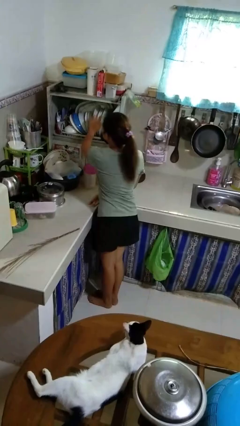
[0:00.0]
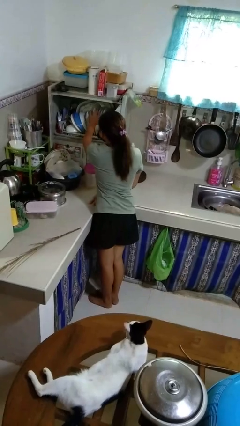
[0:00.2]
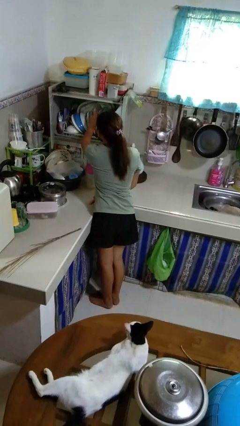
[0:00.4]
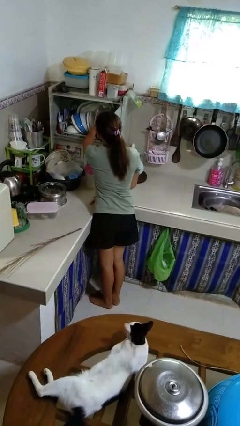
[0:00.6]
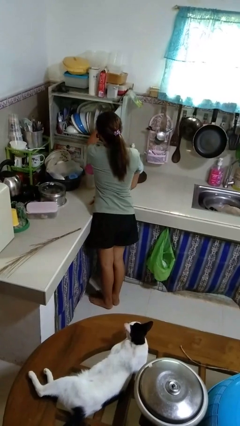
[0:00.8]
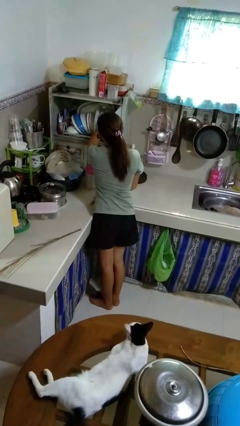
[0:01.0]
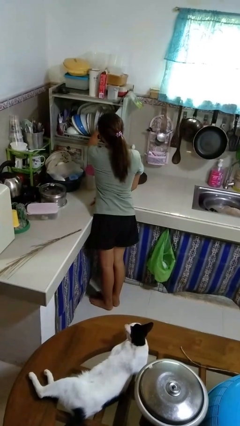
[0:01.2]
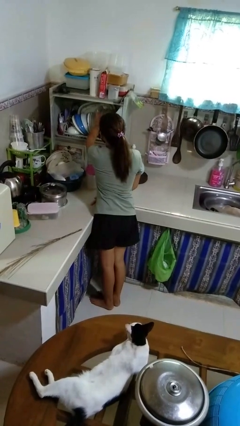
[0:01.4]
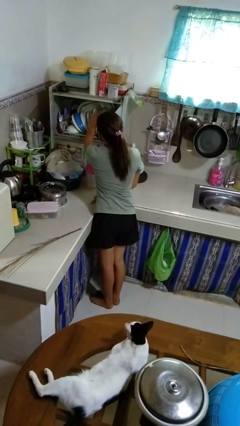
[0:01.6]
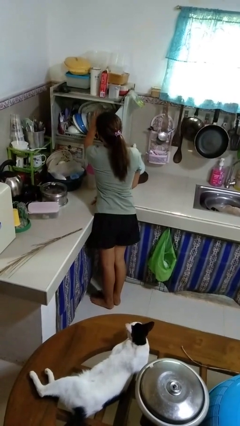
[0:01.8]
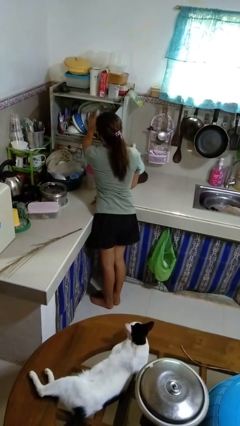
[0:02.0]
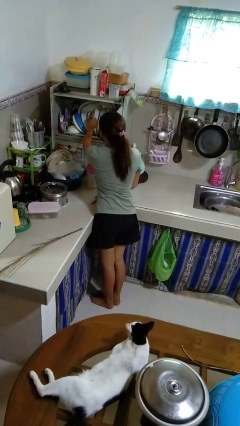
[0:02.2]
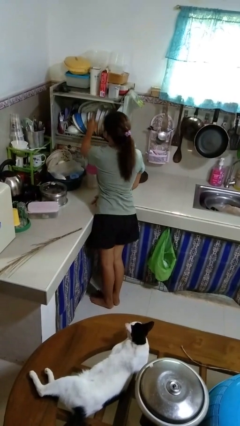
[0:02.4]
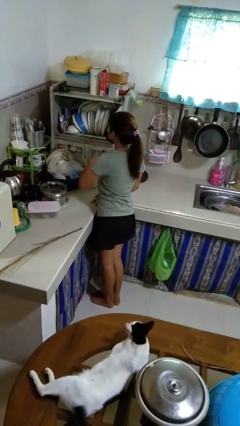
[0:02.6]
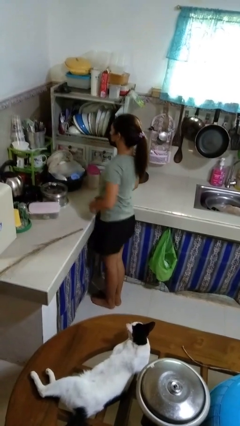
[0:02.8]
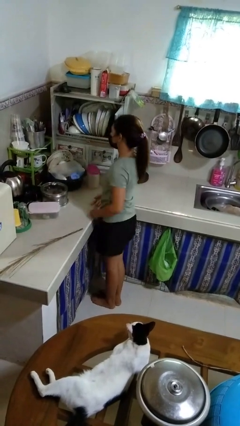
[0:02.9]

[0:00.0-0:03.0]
person searches in kitchen drawer

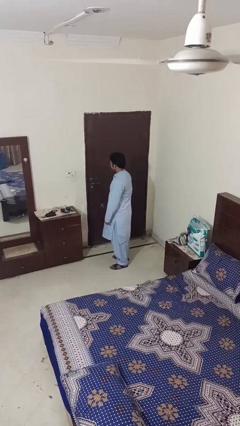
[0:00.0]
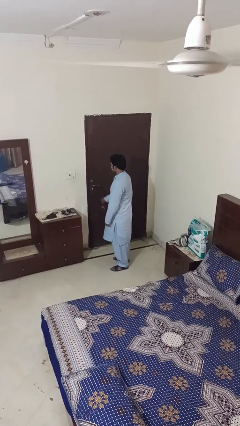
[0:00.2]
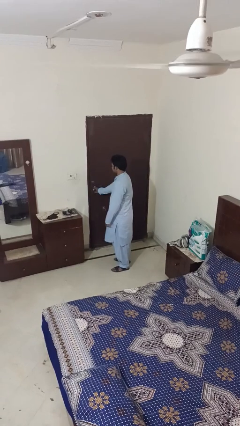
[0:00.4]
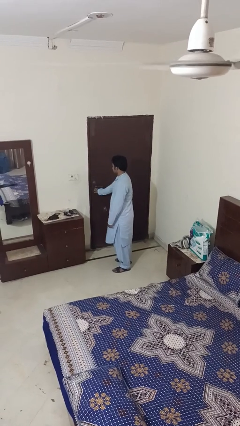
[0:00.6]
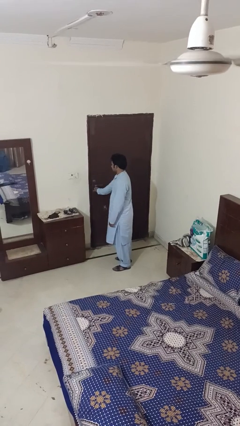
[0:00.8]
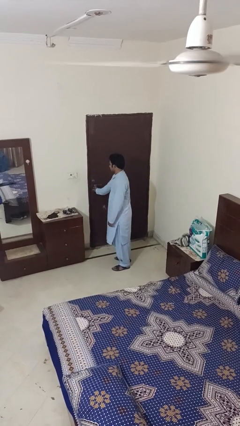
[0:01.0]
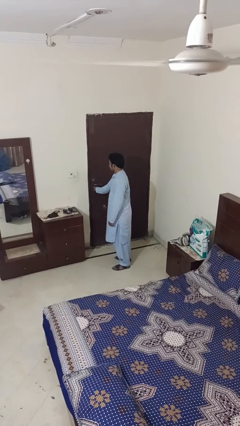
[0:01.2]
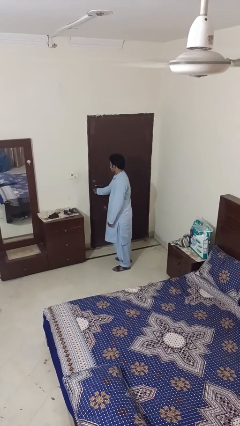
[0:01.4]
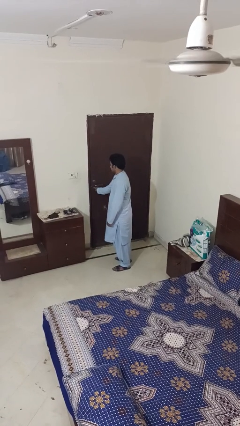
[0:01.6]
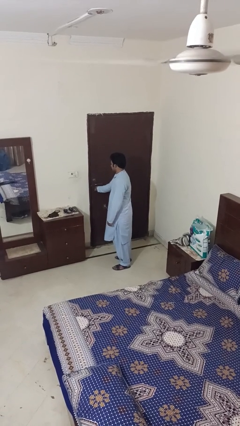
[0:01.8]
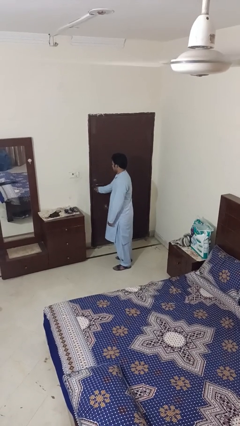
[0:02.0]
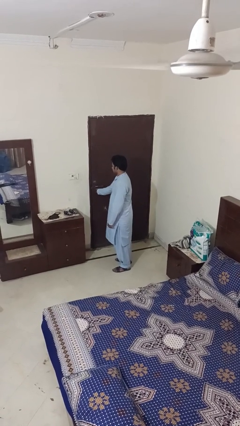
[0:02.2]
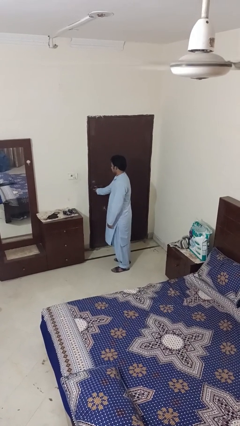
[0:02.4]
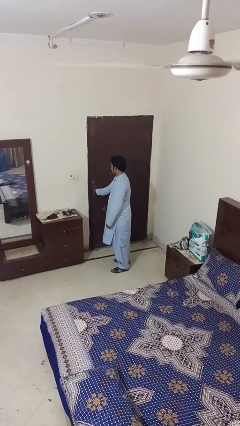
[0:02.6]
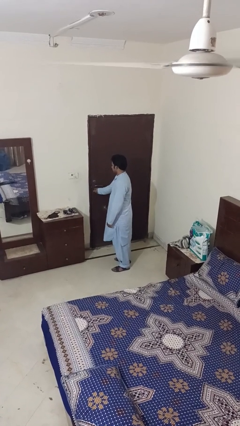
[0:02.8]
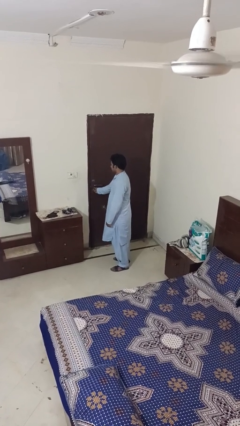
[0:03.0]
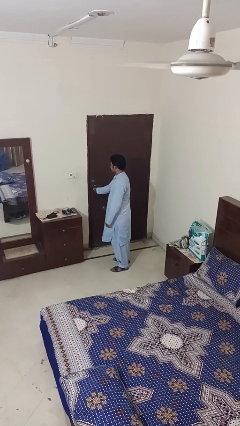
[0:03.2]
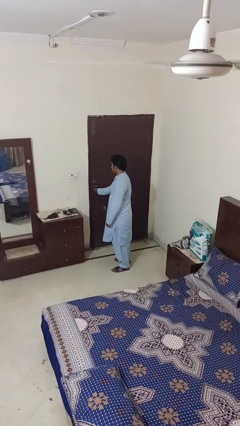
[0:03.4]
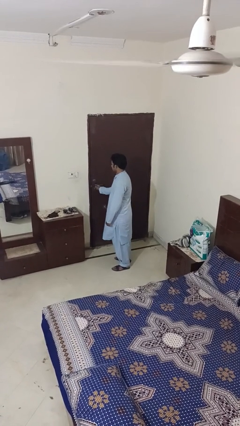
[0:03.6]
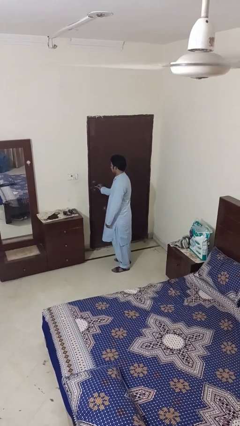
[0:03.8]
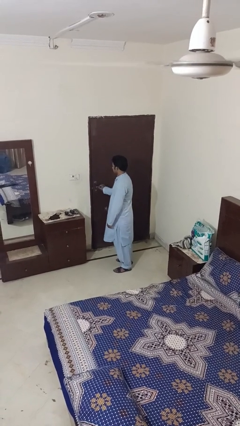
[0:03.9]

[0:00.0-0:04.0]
person unlocks door with keys

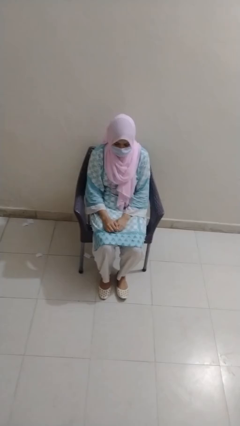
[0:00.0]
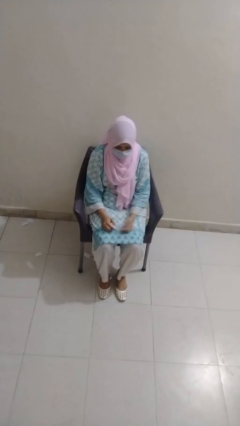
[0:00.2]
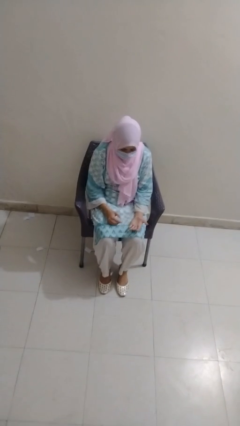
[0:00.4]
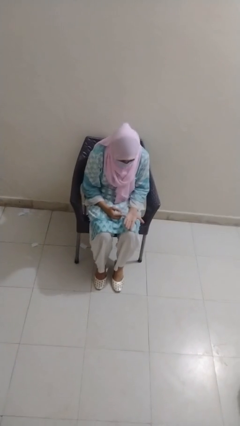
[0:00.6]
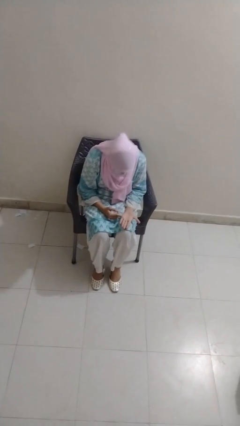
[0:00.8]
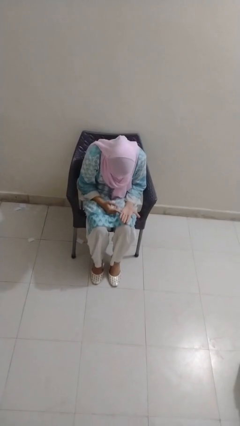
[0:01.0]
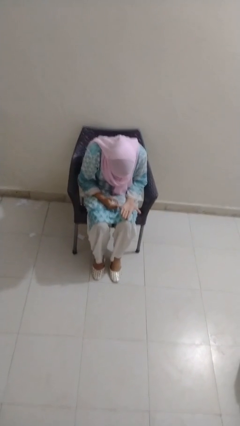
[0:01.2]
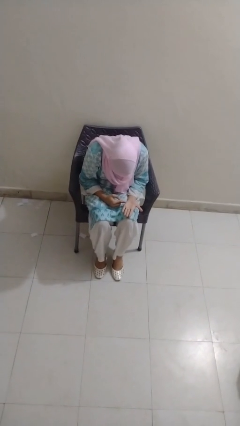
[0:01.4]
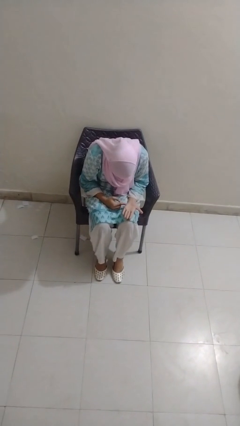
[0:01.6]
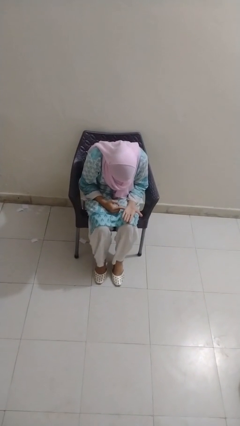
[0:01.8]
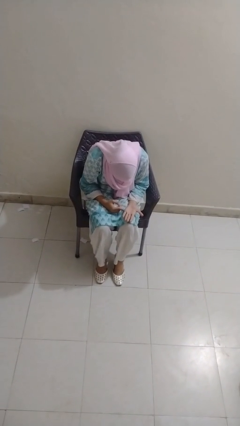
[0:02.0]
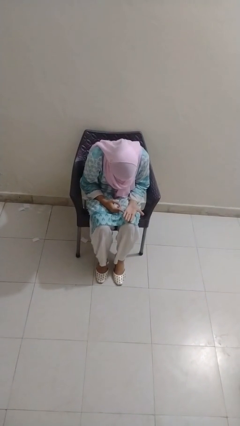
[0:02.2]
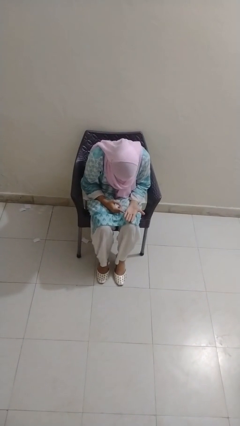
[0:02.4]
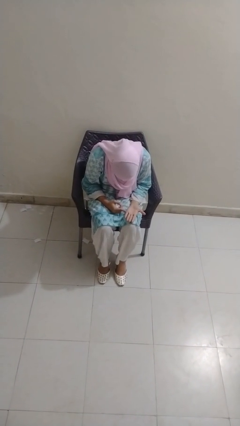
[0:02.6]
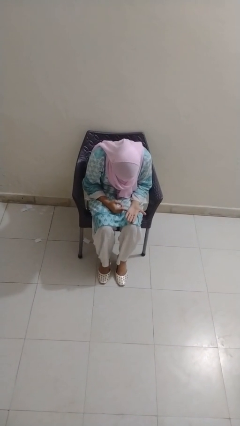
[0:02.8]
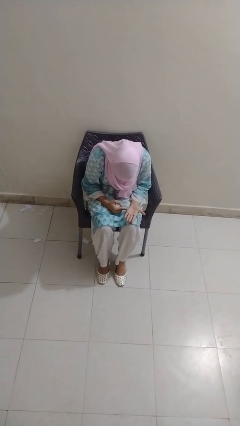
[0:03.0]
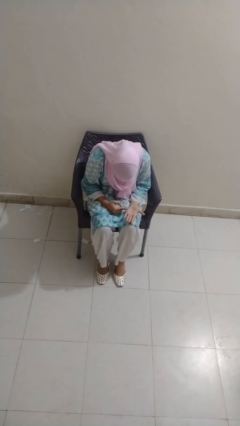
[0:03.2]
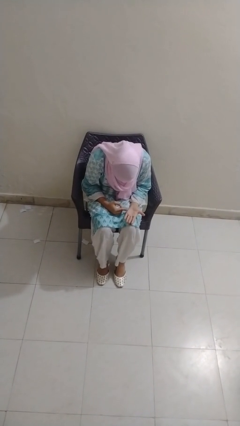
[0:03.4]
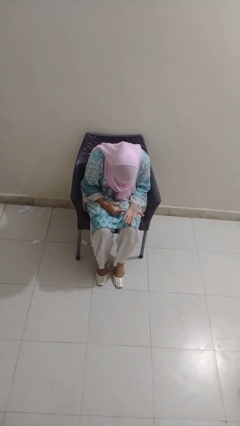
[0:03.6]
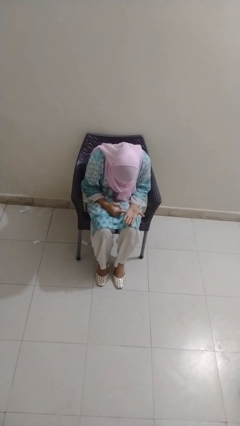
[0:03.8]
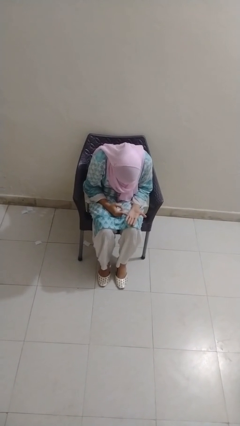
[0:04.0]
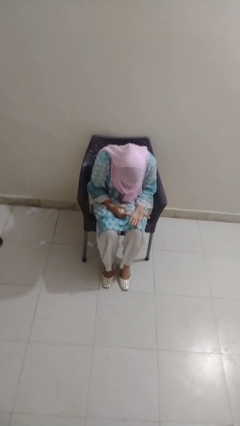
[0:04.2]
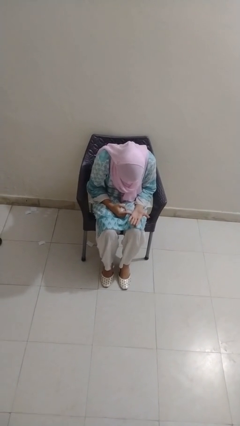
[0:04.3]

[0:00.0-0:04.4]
person looks at hands in lap

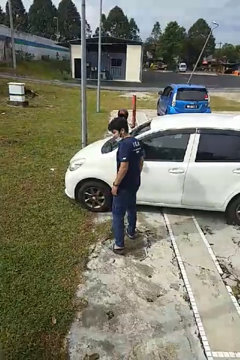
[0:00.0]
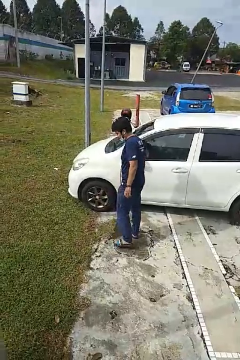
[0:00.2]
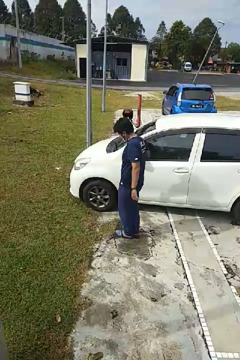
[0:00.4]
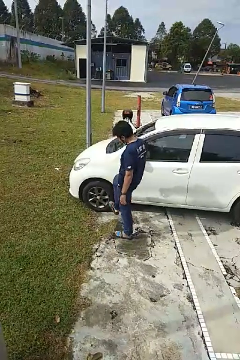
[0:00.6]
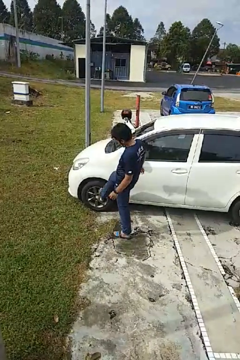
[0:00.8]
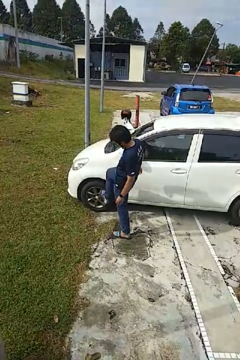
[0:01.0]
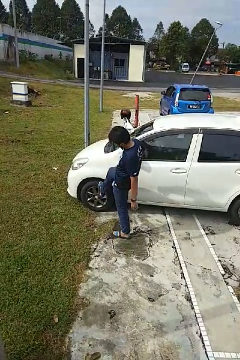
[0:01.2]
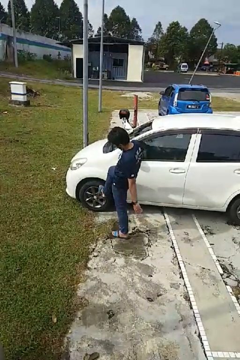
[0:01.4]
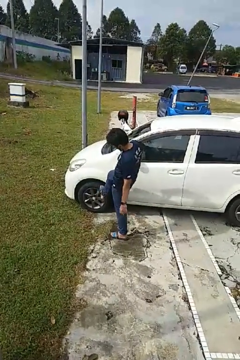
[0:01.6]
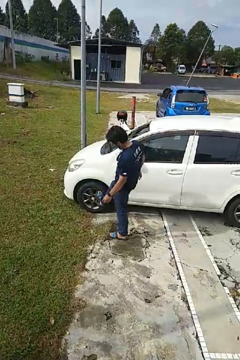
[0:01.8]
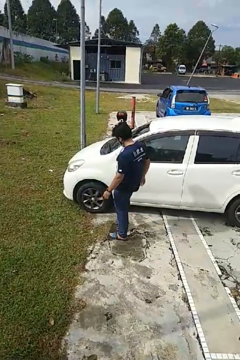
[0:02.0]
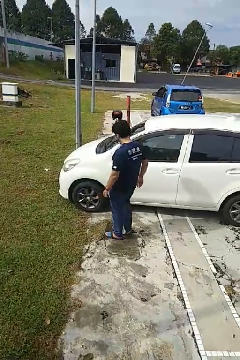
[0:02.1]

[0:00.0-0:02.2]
person kicks car tires

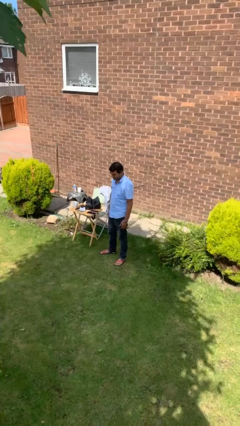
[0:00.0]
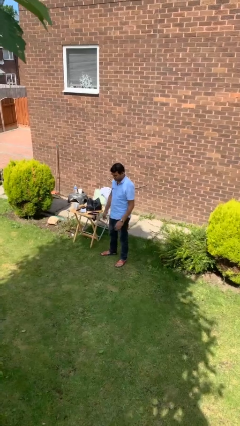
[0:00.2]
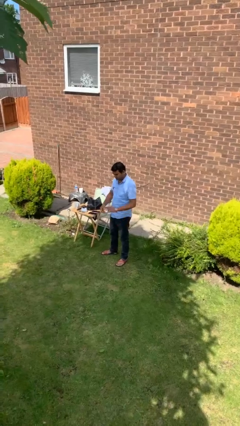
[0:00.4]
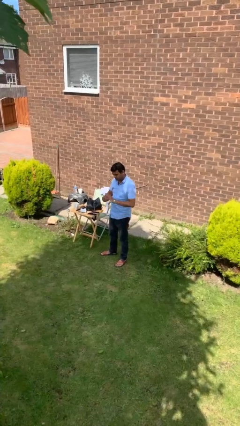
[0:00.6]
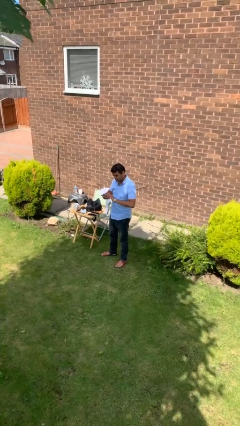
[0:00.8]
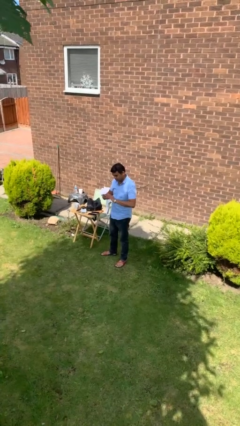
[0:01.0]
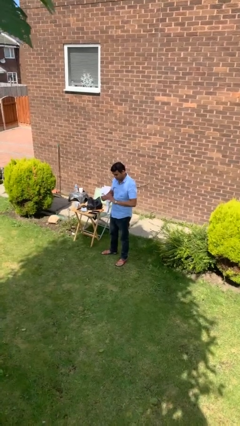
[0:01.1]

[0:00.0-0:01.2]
person takes off ring

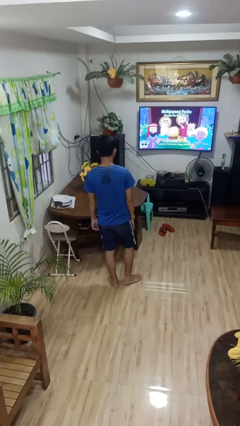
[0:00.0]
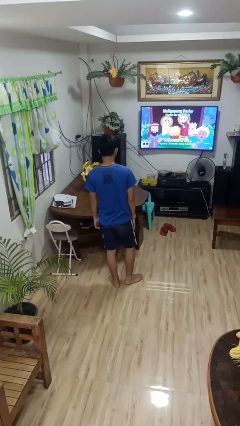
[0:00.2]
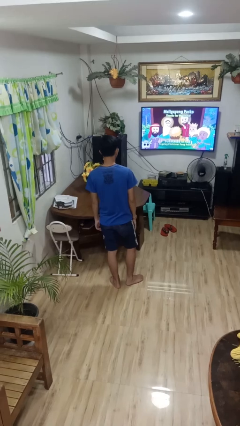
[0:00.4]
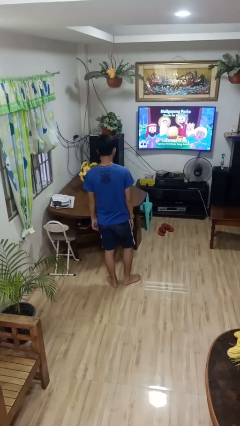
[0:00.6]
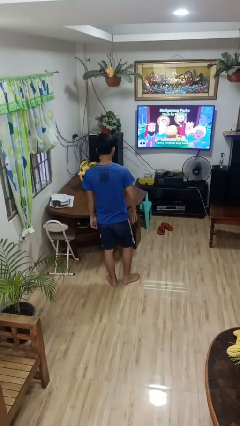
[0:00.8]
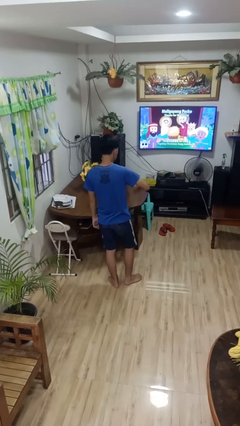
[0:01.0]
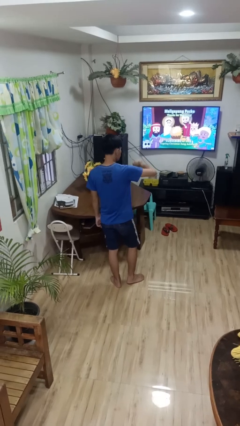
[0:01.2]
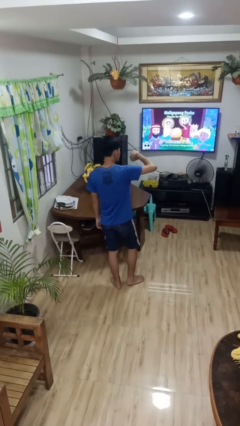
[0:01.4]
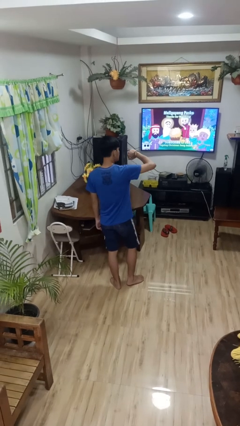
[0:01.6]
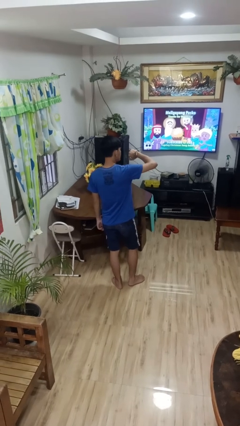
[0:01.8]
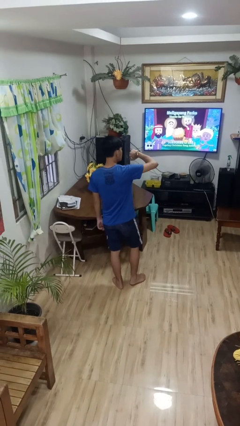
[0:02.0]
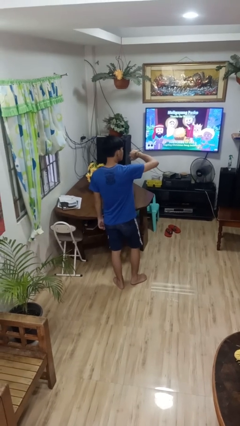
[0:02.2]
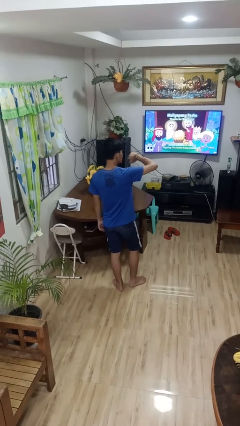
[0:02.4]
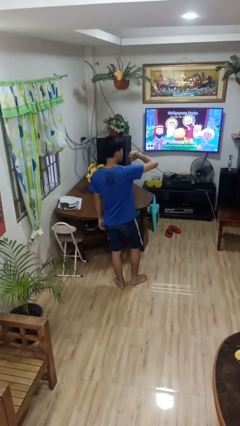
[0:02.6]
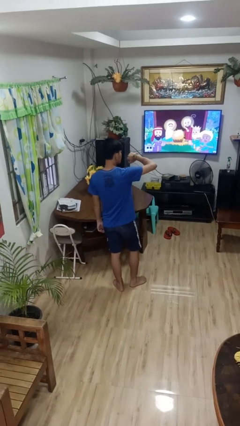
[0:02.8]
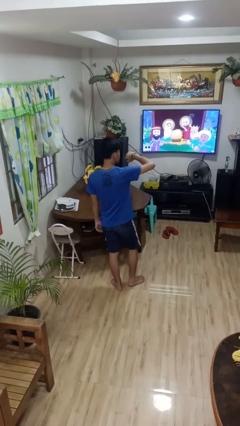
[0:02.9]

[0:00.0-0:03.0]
person looks at wristwatch

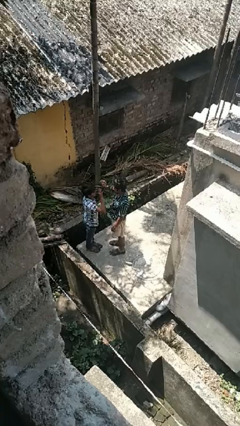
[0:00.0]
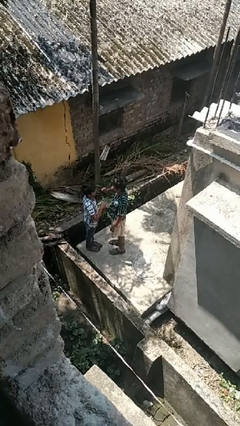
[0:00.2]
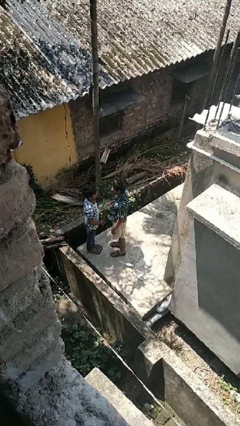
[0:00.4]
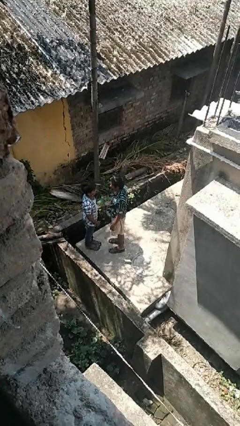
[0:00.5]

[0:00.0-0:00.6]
person highfives hand
